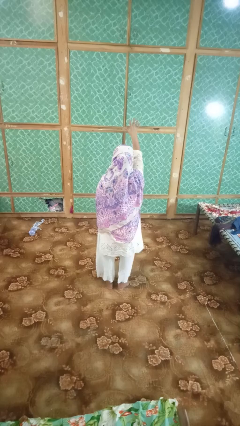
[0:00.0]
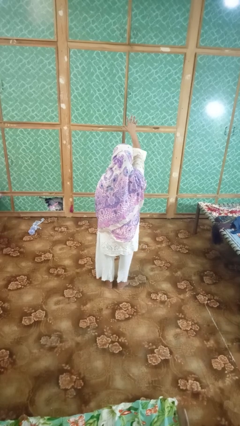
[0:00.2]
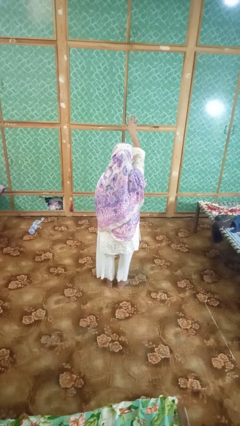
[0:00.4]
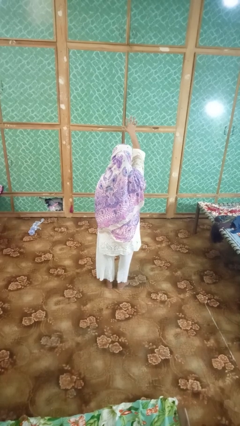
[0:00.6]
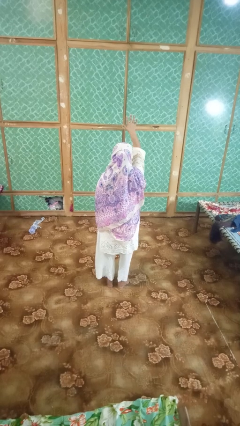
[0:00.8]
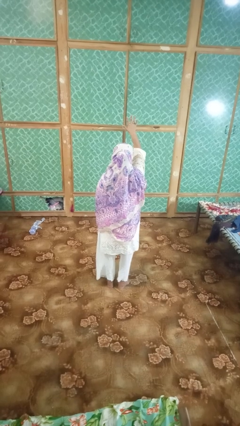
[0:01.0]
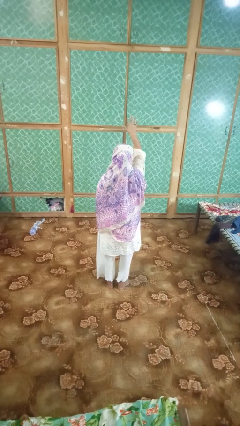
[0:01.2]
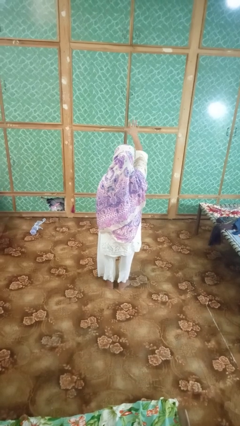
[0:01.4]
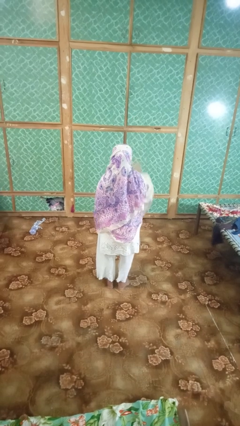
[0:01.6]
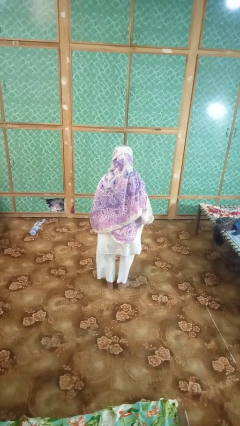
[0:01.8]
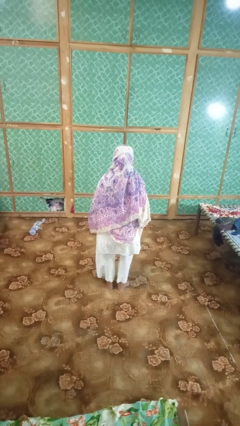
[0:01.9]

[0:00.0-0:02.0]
person gestures number five

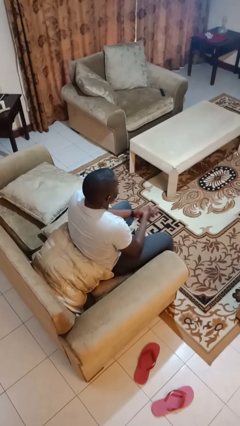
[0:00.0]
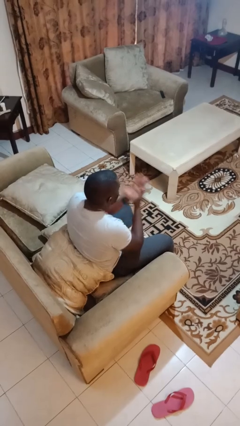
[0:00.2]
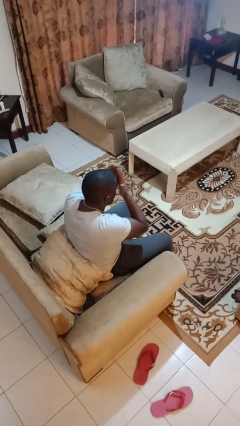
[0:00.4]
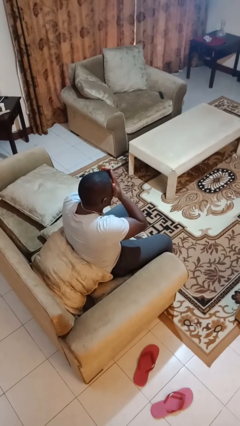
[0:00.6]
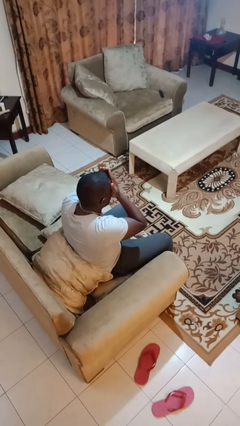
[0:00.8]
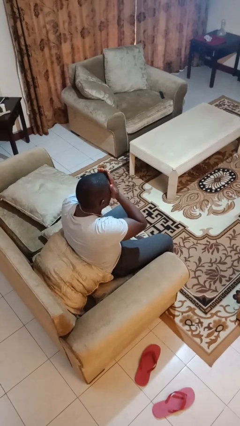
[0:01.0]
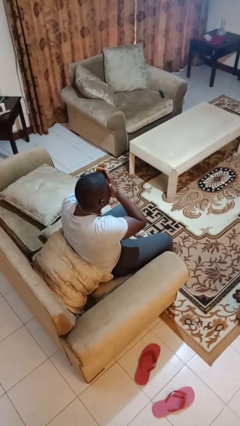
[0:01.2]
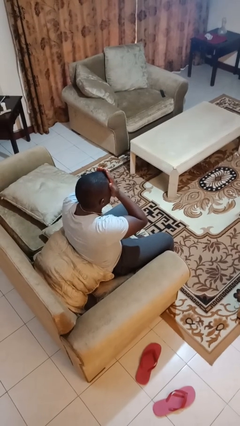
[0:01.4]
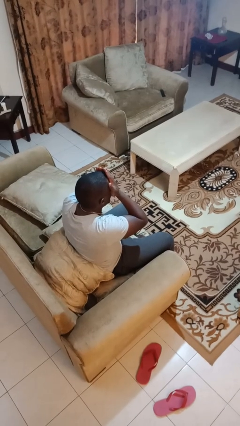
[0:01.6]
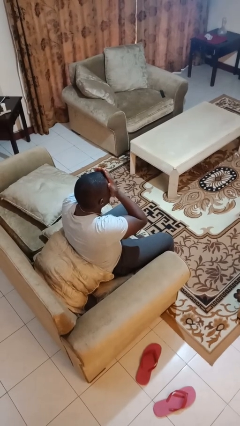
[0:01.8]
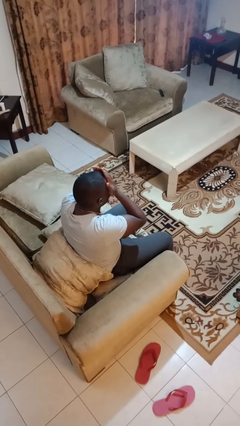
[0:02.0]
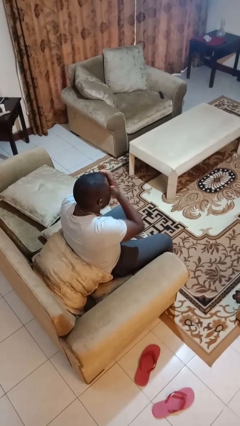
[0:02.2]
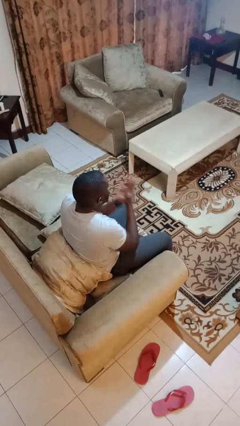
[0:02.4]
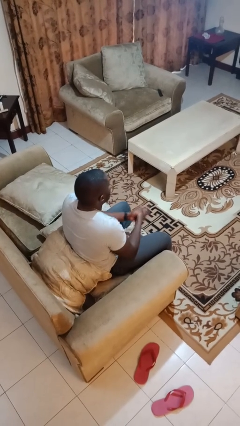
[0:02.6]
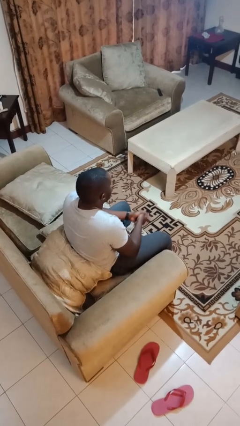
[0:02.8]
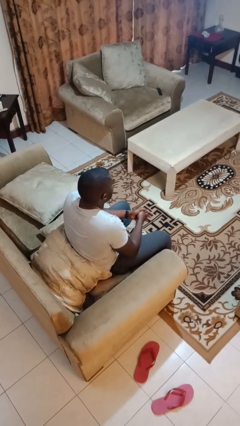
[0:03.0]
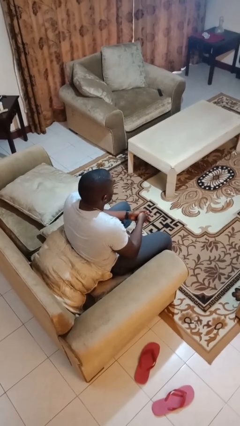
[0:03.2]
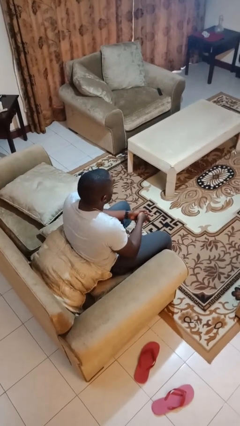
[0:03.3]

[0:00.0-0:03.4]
person covers face with hands

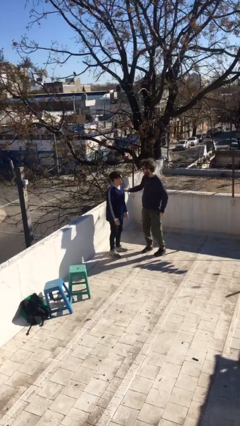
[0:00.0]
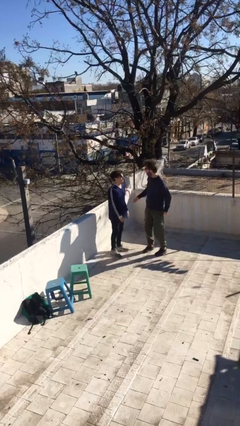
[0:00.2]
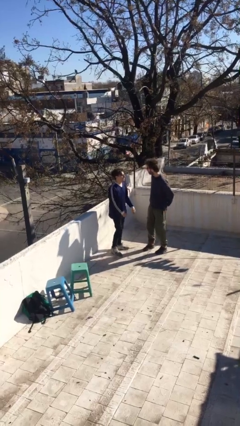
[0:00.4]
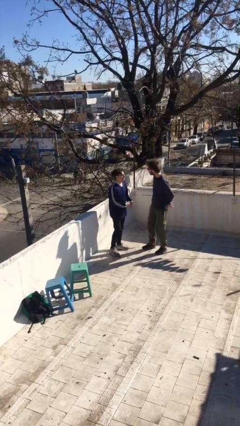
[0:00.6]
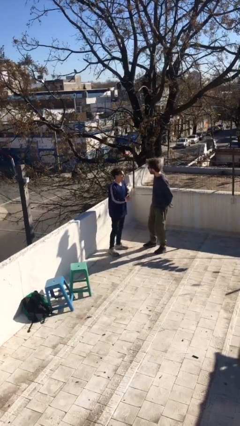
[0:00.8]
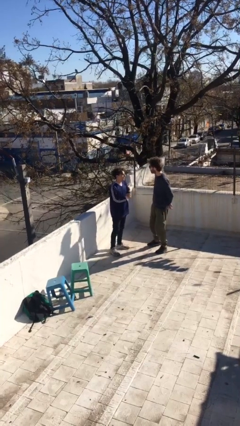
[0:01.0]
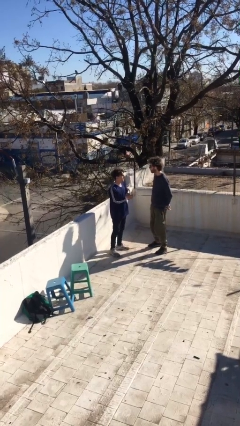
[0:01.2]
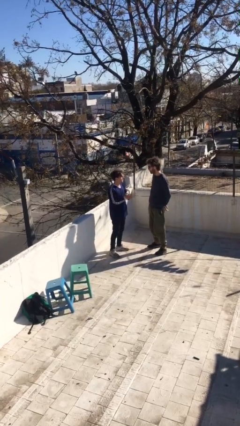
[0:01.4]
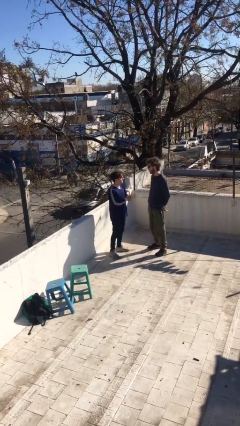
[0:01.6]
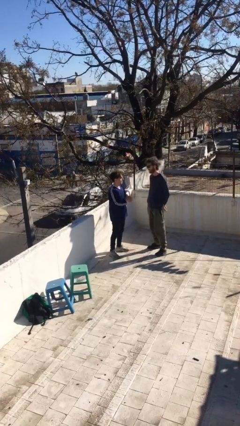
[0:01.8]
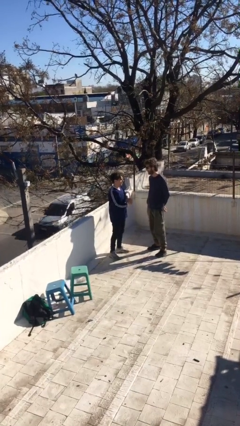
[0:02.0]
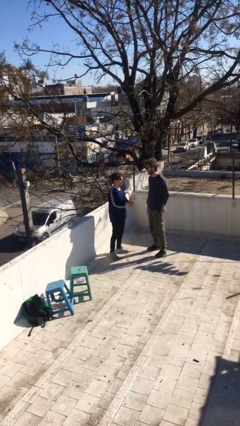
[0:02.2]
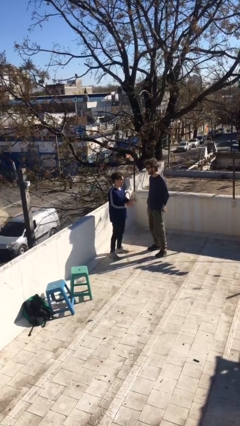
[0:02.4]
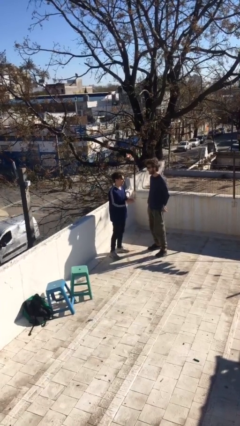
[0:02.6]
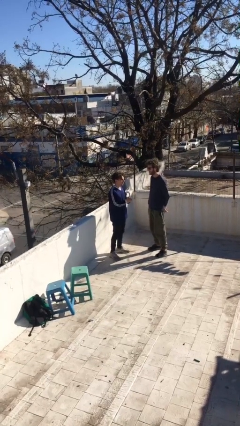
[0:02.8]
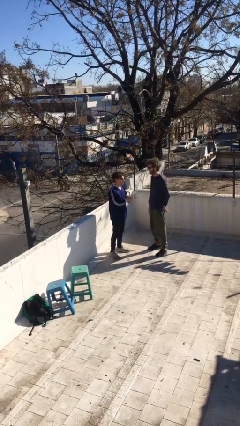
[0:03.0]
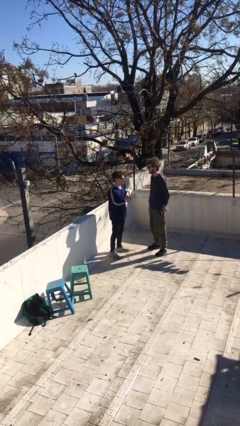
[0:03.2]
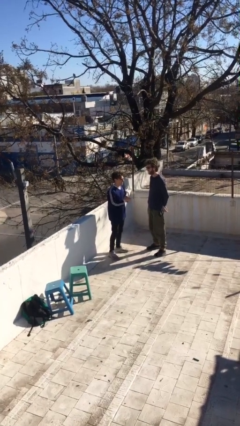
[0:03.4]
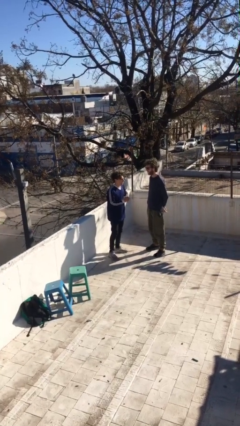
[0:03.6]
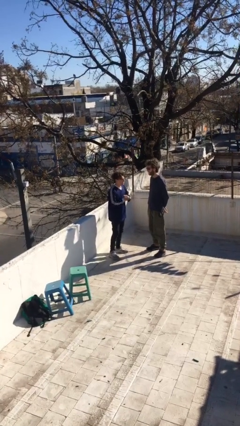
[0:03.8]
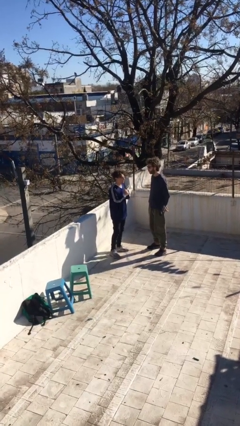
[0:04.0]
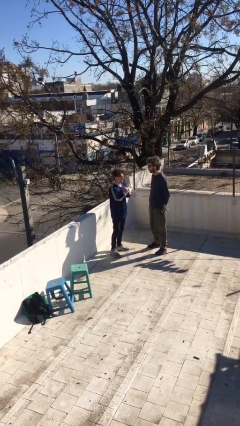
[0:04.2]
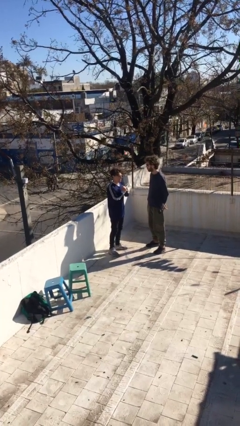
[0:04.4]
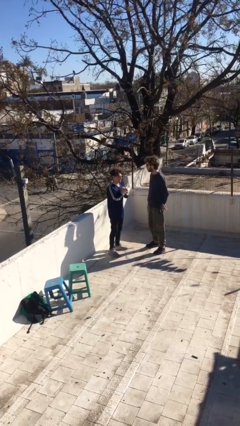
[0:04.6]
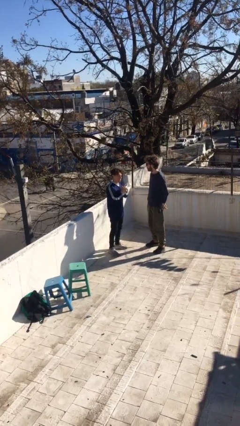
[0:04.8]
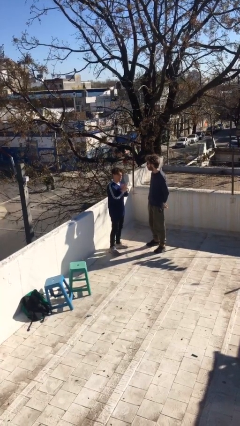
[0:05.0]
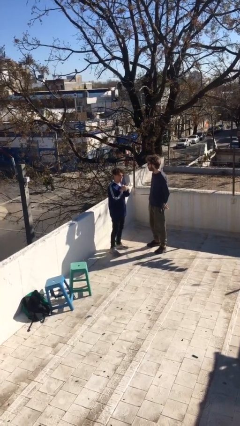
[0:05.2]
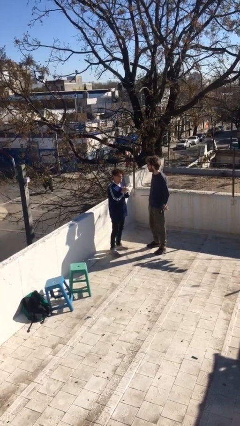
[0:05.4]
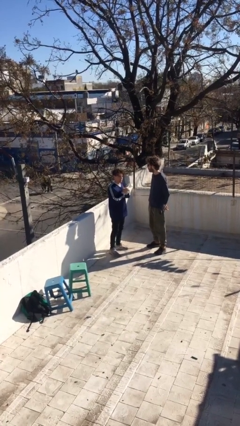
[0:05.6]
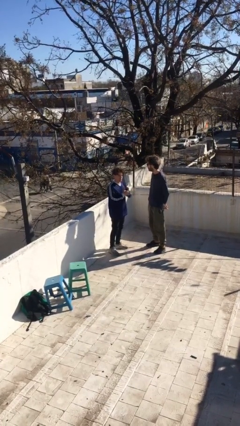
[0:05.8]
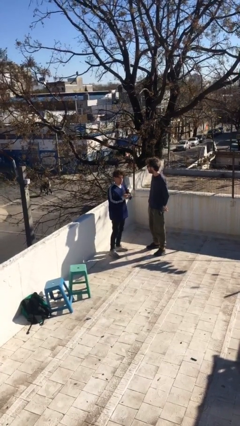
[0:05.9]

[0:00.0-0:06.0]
person talks to person

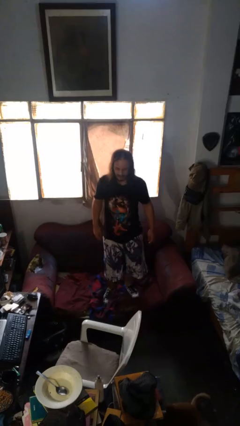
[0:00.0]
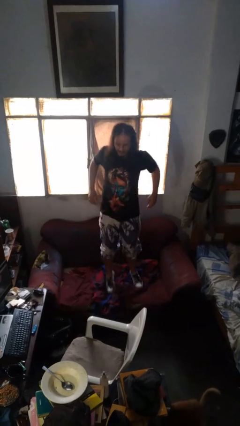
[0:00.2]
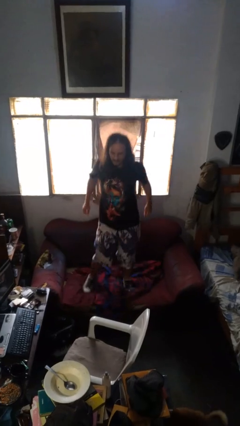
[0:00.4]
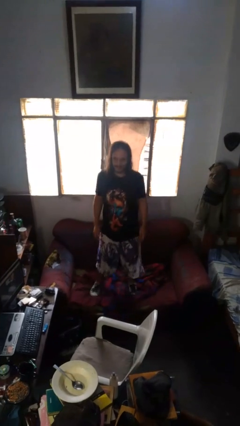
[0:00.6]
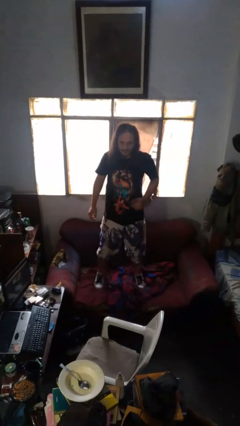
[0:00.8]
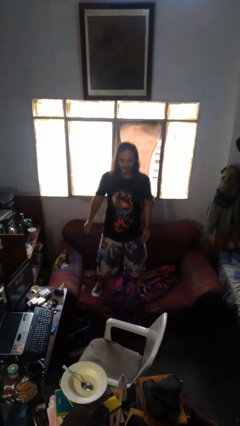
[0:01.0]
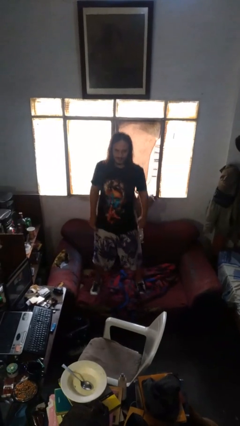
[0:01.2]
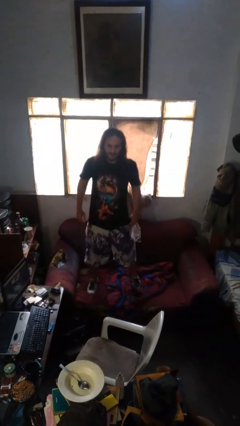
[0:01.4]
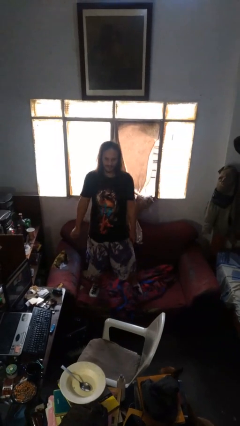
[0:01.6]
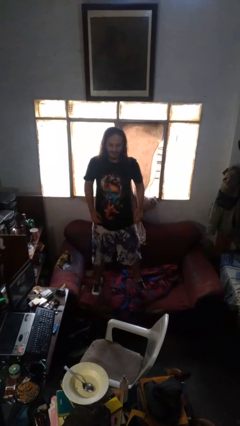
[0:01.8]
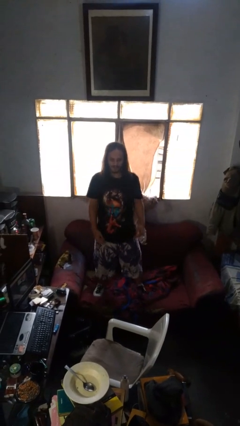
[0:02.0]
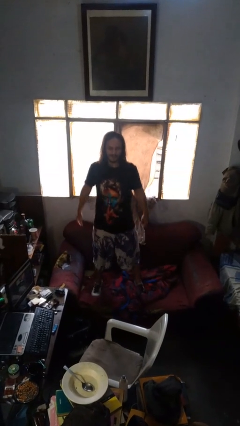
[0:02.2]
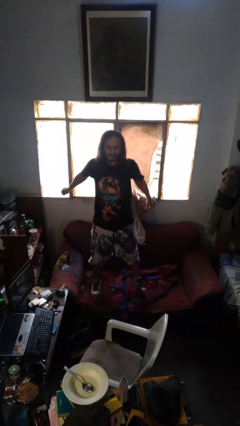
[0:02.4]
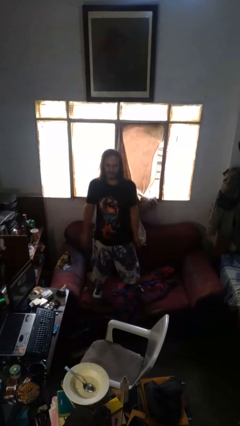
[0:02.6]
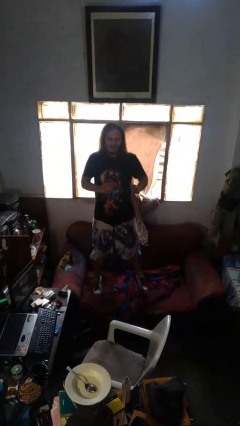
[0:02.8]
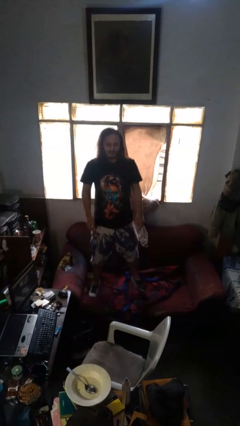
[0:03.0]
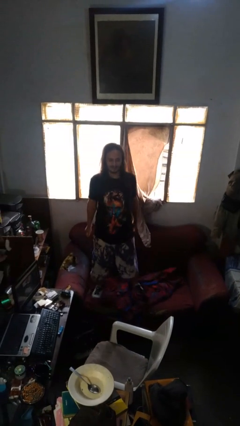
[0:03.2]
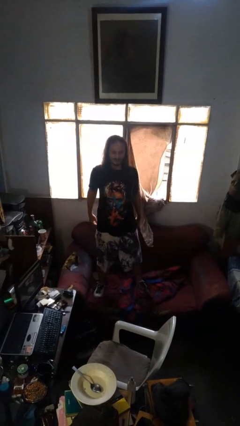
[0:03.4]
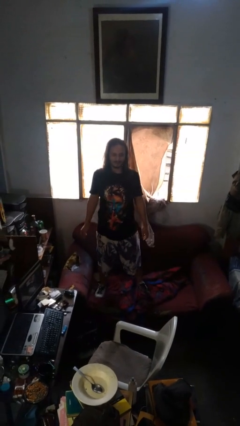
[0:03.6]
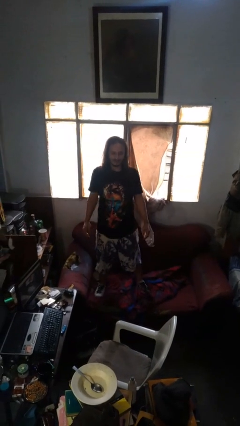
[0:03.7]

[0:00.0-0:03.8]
person jumps on couch

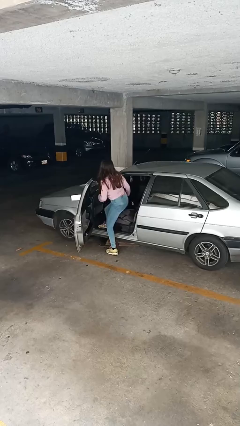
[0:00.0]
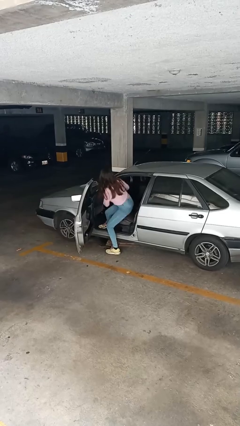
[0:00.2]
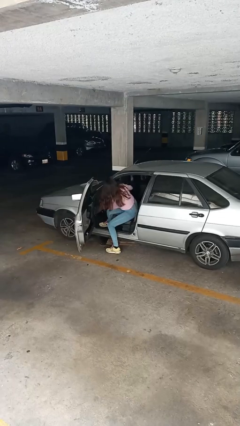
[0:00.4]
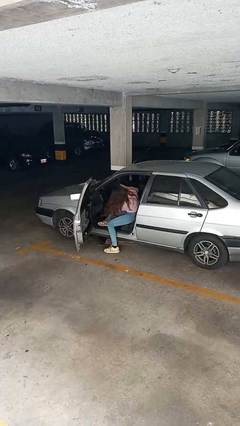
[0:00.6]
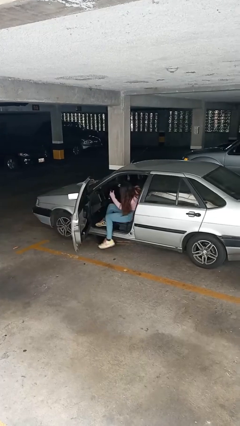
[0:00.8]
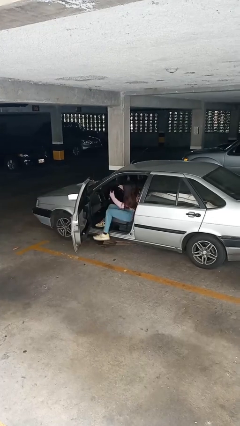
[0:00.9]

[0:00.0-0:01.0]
person enters car

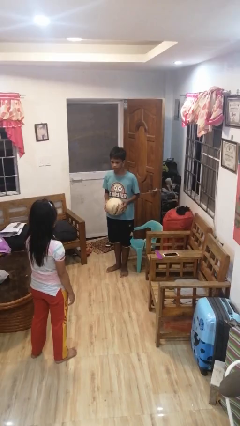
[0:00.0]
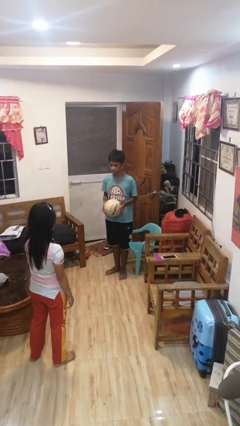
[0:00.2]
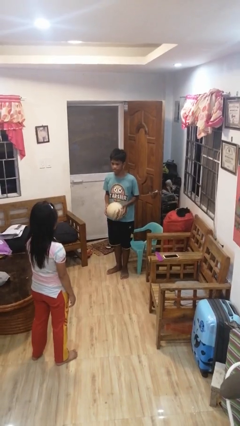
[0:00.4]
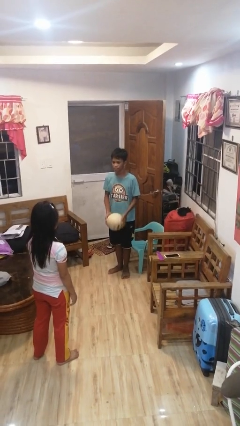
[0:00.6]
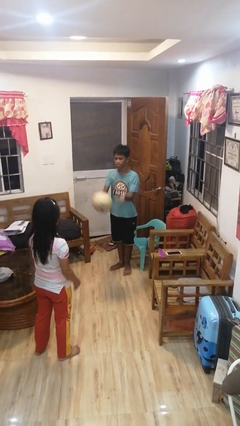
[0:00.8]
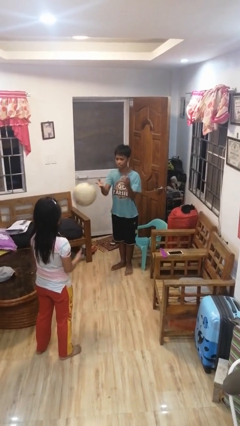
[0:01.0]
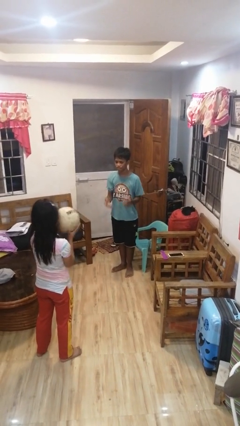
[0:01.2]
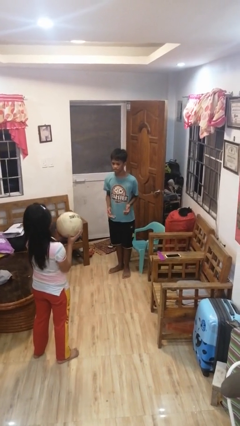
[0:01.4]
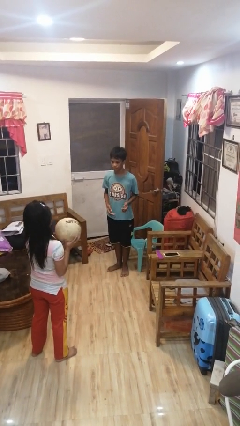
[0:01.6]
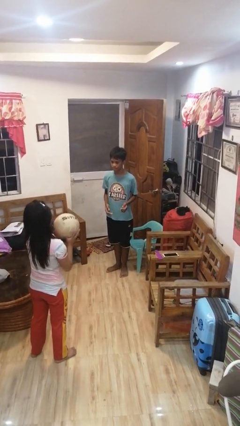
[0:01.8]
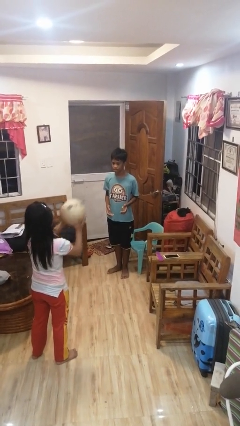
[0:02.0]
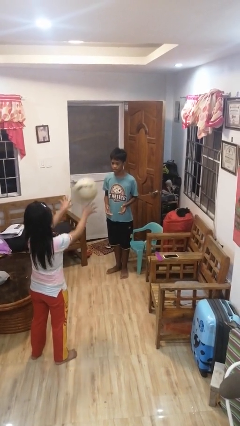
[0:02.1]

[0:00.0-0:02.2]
person throws object to person
